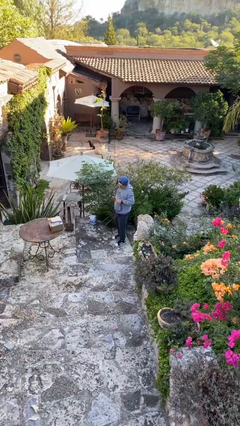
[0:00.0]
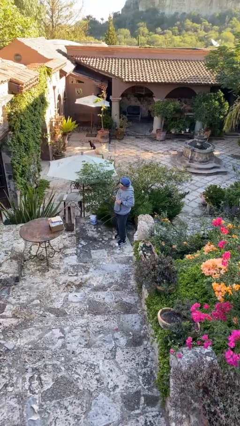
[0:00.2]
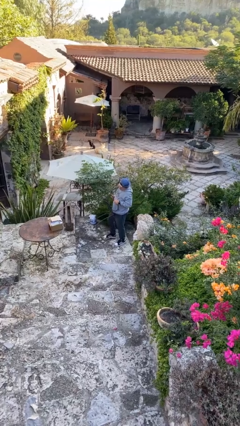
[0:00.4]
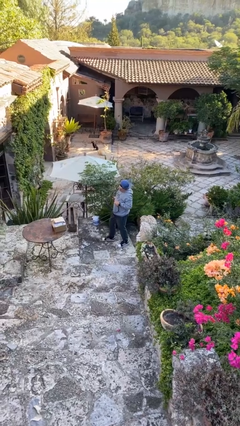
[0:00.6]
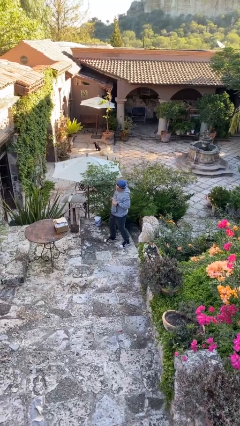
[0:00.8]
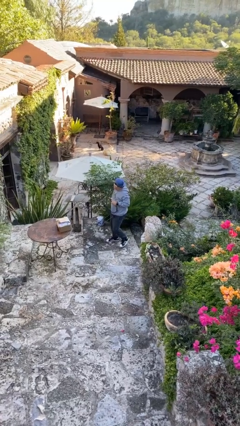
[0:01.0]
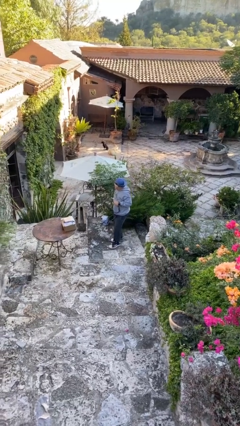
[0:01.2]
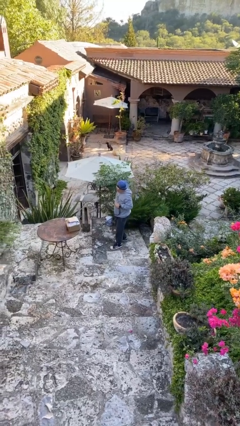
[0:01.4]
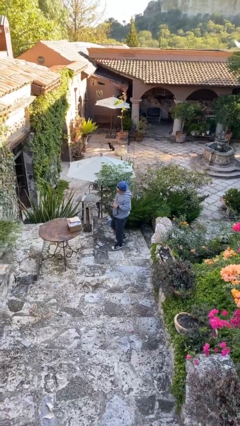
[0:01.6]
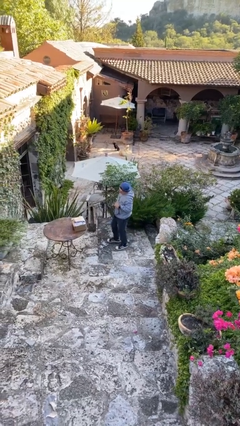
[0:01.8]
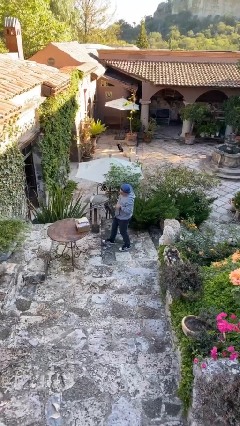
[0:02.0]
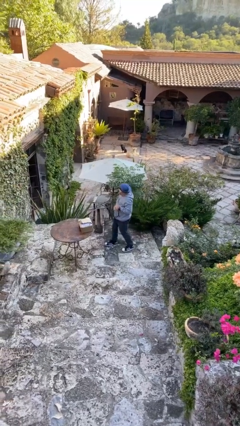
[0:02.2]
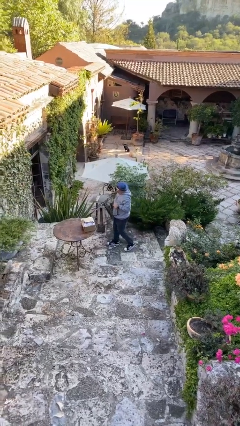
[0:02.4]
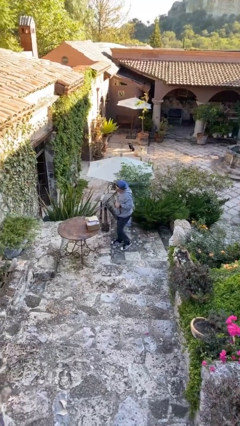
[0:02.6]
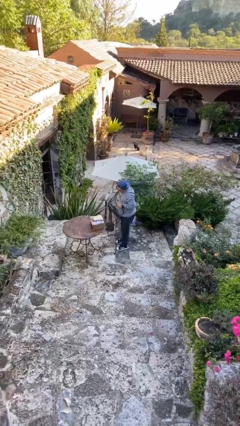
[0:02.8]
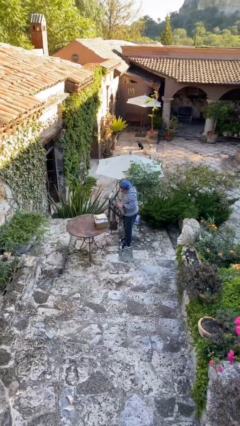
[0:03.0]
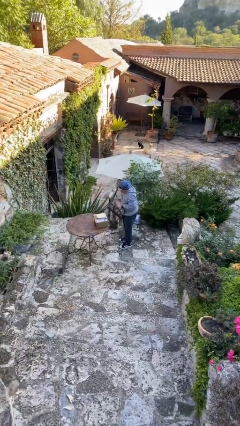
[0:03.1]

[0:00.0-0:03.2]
person carries heavy object

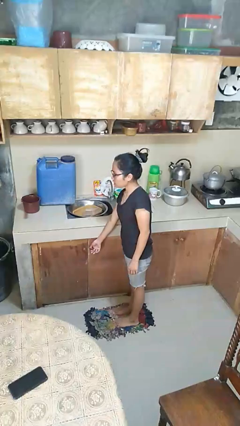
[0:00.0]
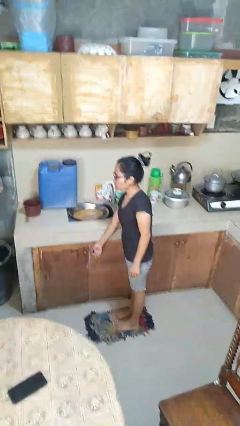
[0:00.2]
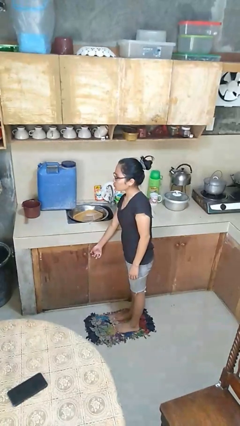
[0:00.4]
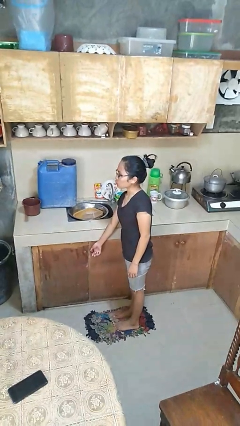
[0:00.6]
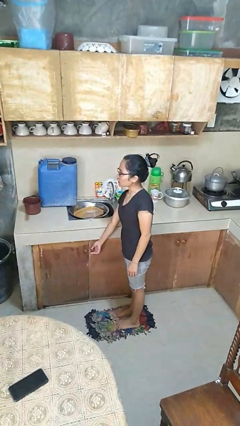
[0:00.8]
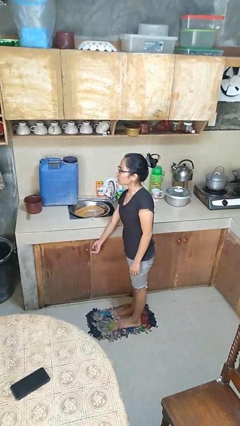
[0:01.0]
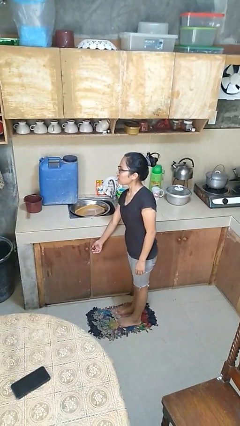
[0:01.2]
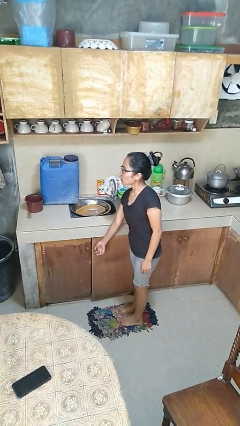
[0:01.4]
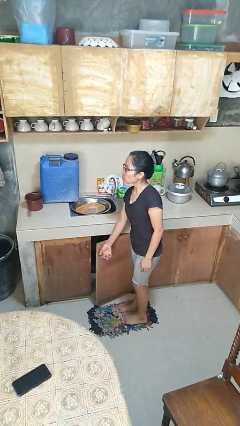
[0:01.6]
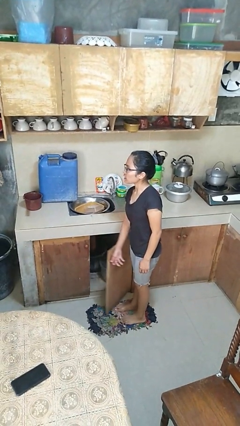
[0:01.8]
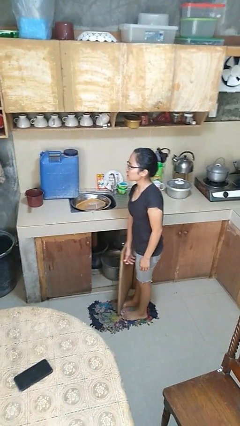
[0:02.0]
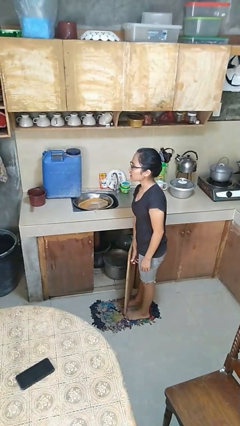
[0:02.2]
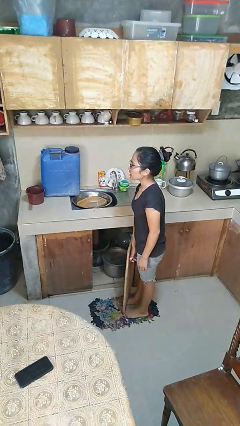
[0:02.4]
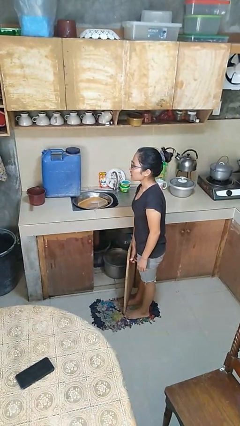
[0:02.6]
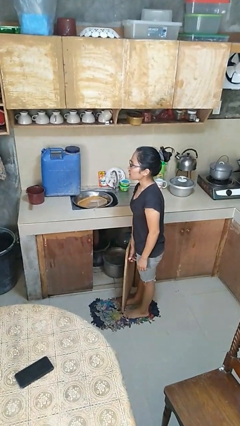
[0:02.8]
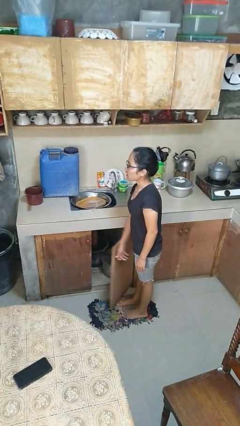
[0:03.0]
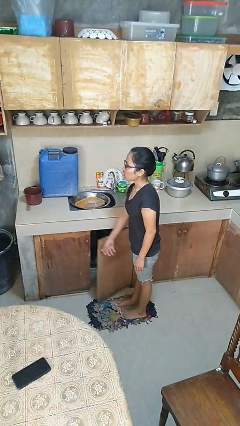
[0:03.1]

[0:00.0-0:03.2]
person opens cabinet

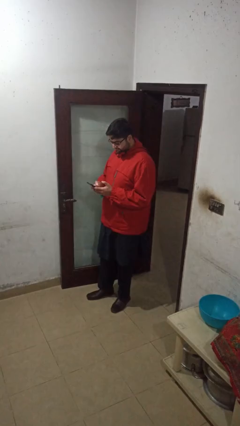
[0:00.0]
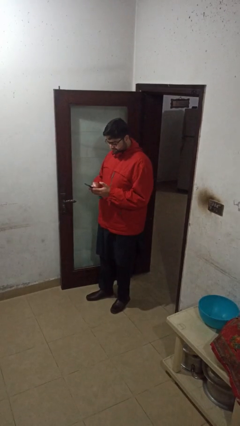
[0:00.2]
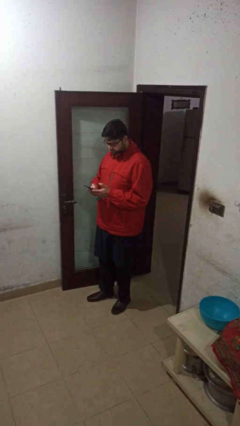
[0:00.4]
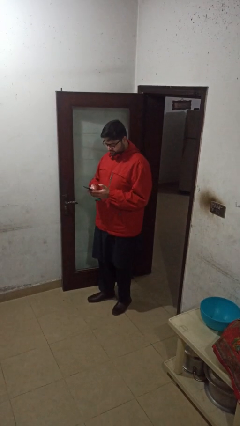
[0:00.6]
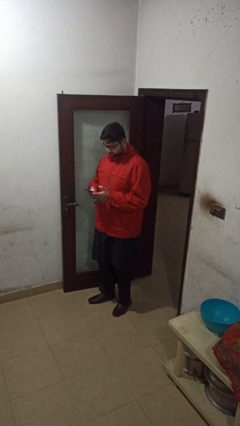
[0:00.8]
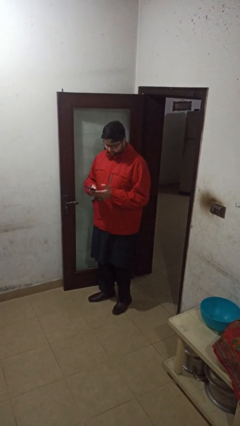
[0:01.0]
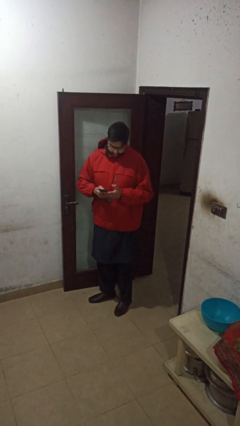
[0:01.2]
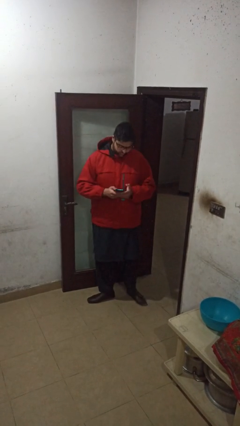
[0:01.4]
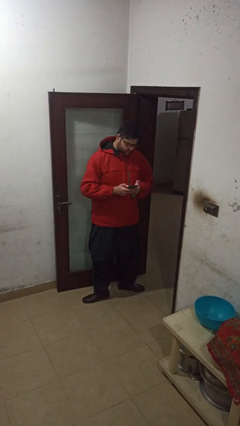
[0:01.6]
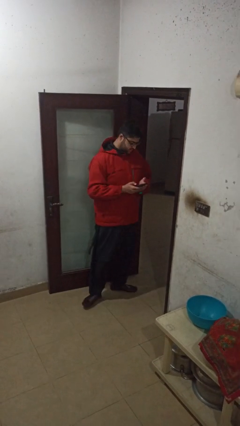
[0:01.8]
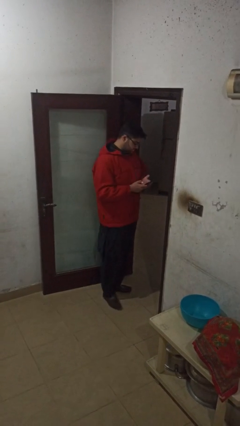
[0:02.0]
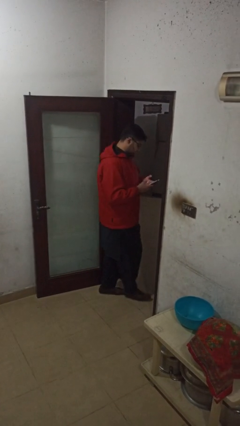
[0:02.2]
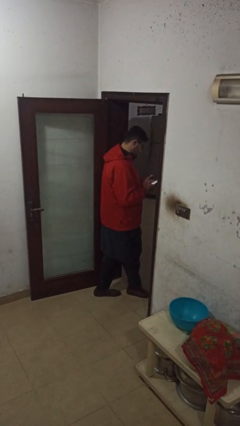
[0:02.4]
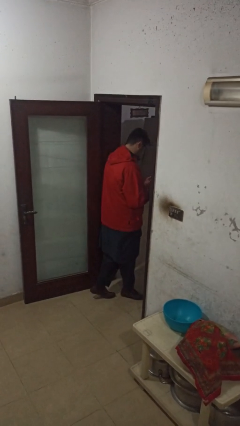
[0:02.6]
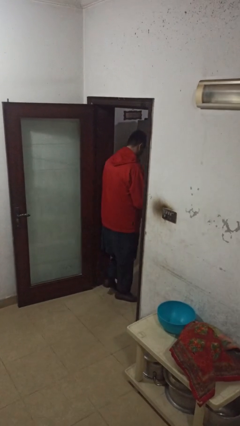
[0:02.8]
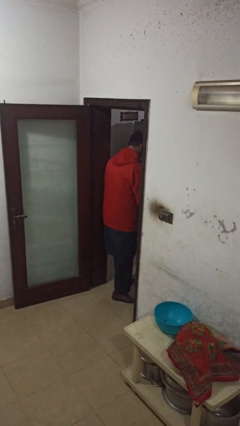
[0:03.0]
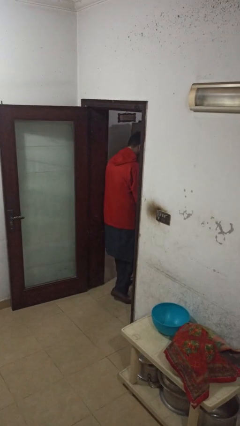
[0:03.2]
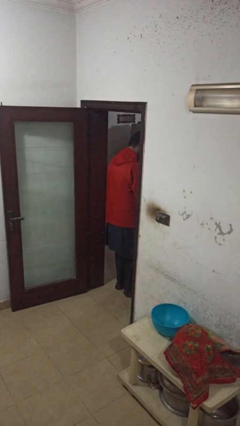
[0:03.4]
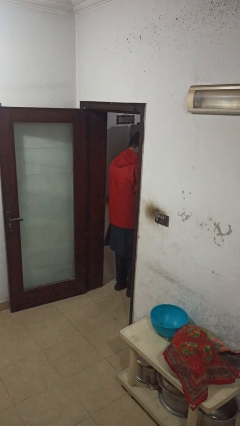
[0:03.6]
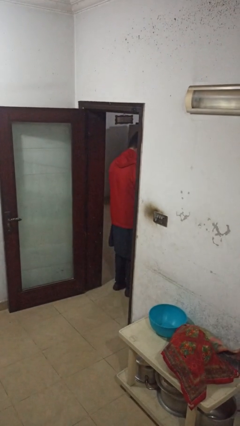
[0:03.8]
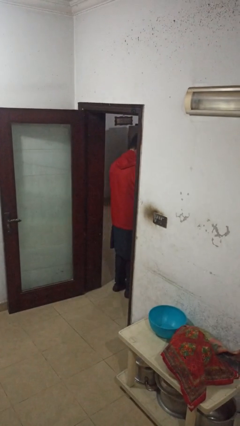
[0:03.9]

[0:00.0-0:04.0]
person exits scene through structure

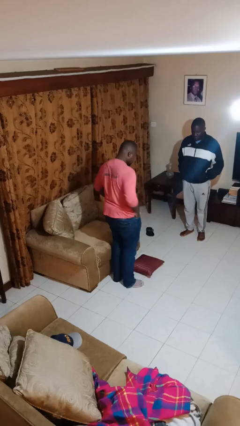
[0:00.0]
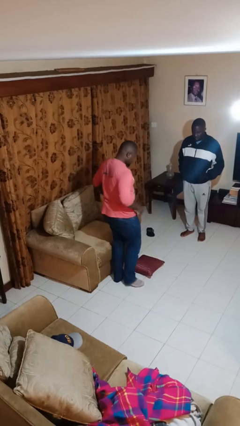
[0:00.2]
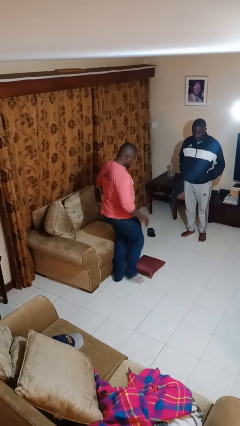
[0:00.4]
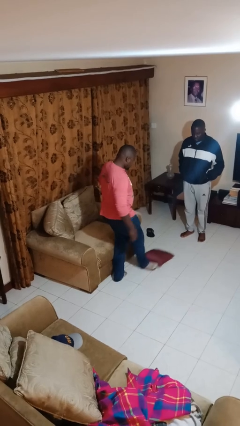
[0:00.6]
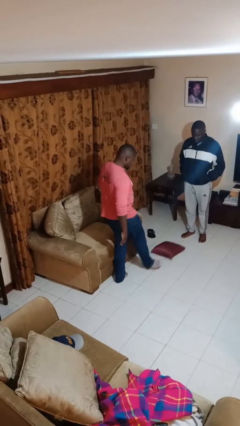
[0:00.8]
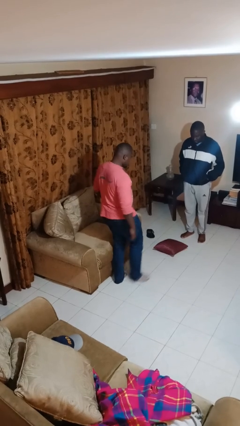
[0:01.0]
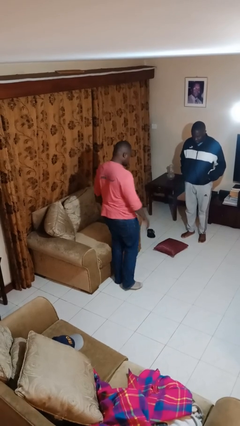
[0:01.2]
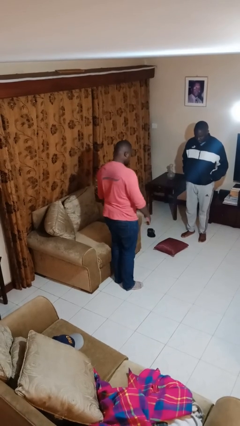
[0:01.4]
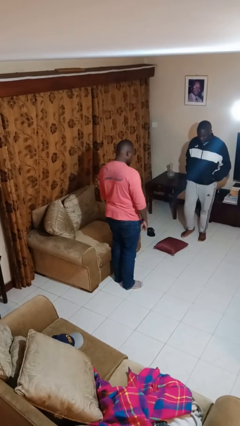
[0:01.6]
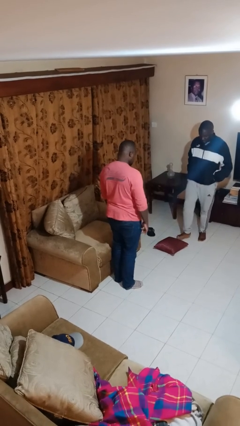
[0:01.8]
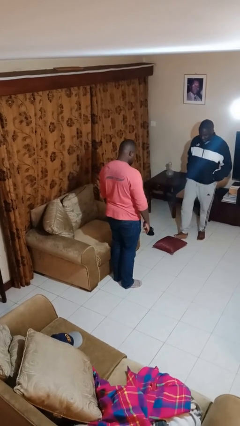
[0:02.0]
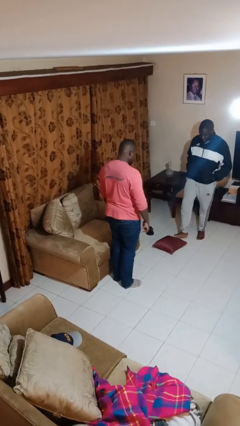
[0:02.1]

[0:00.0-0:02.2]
person kicks object to person

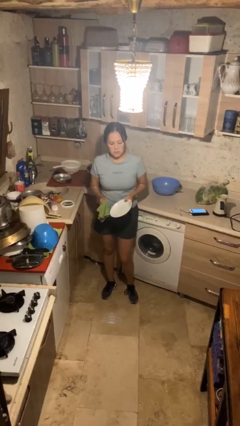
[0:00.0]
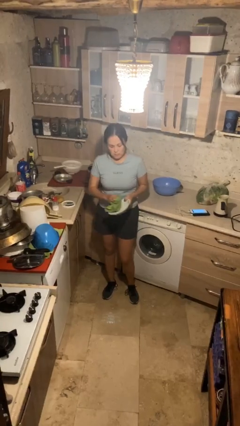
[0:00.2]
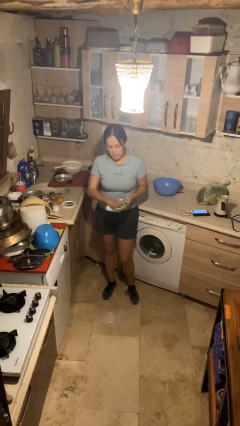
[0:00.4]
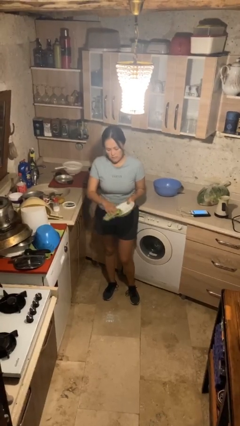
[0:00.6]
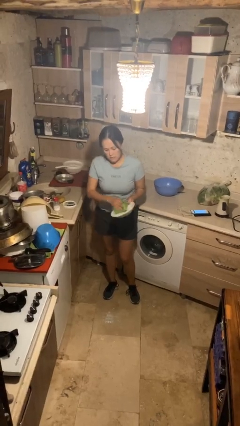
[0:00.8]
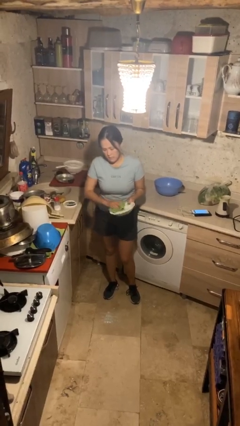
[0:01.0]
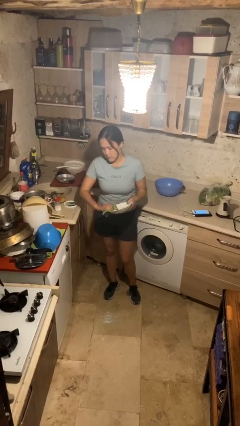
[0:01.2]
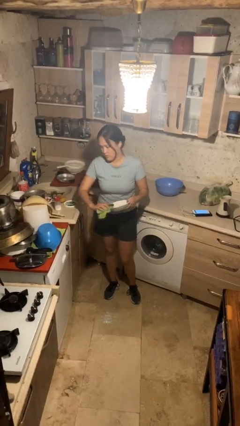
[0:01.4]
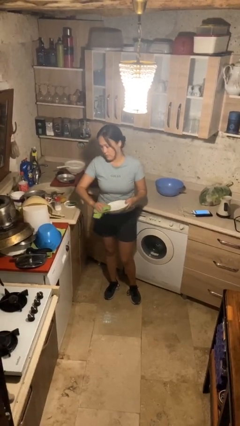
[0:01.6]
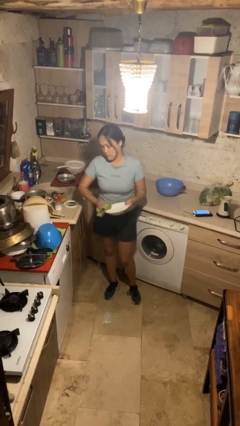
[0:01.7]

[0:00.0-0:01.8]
person dries dish

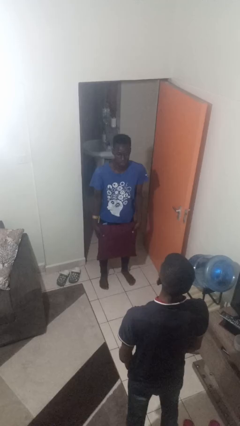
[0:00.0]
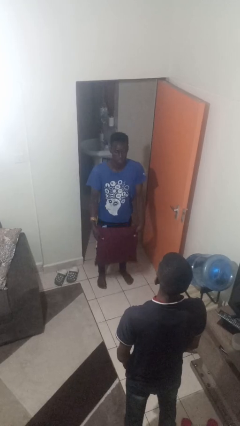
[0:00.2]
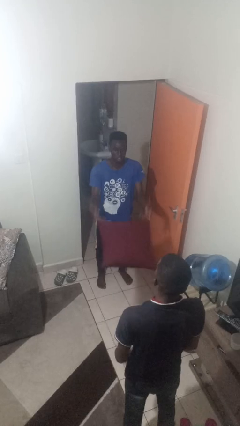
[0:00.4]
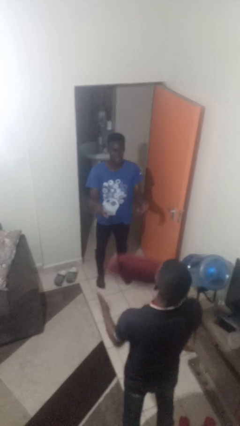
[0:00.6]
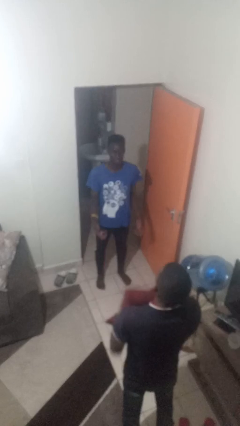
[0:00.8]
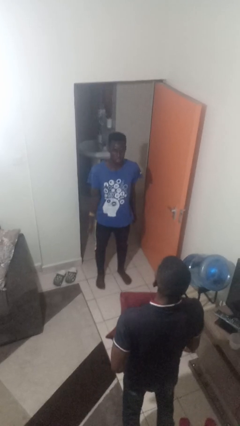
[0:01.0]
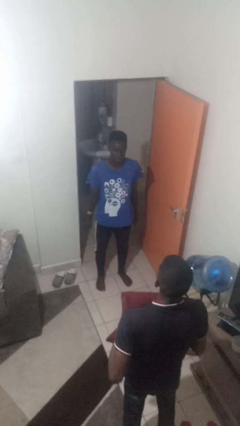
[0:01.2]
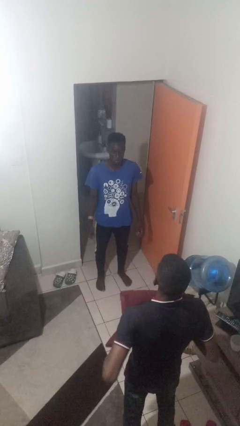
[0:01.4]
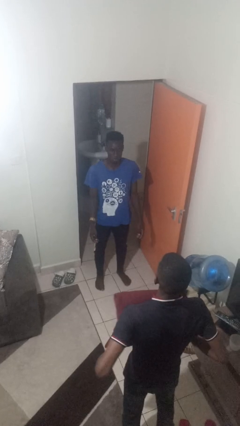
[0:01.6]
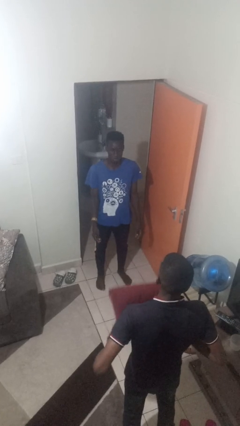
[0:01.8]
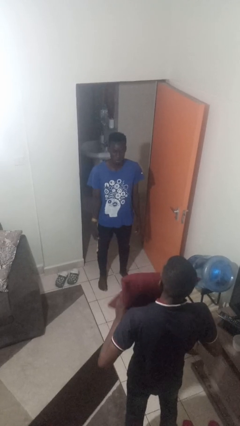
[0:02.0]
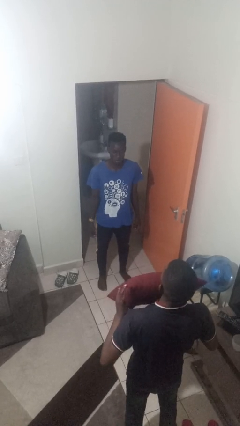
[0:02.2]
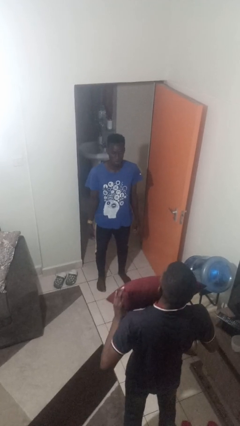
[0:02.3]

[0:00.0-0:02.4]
person throws object to person

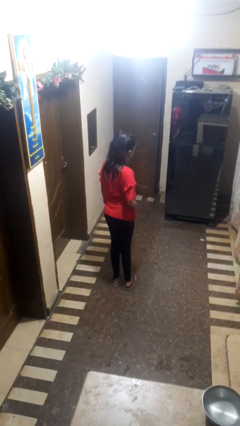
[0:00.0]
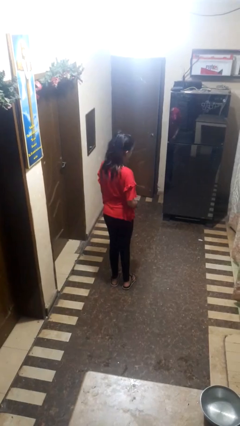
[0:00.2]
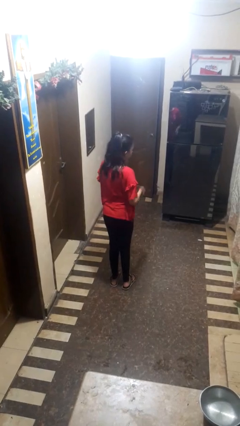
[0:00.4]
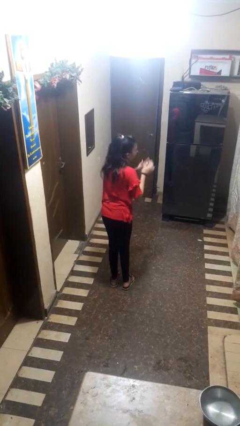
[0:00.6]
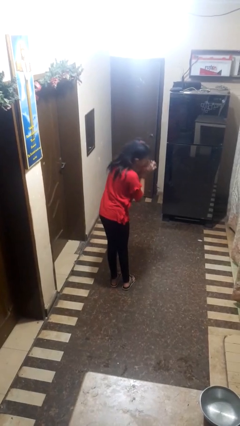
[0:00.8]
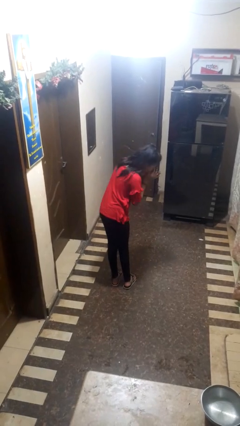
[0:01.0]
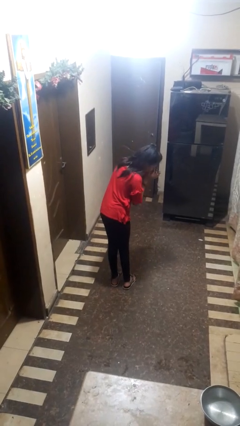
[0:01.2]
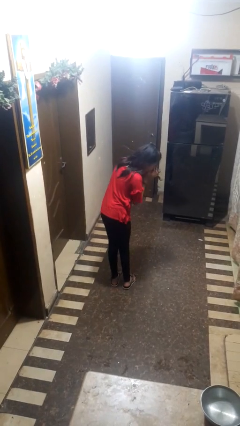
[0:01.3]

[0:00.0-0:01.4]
person sneezes into hand
